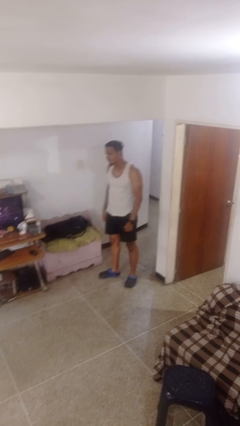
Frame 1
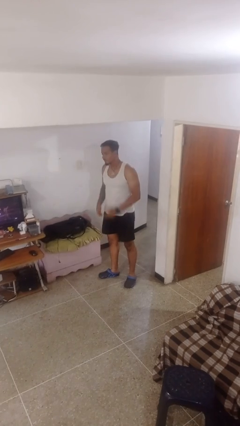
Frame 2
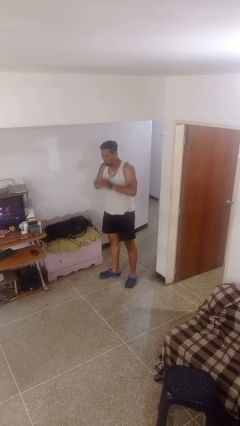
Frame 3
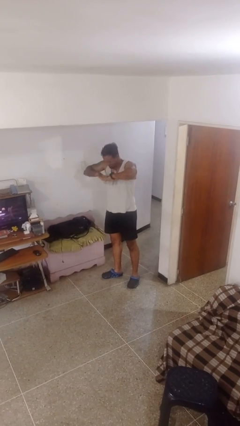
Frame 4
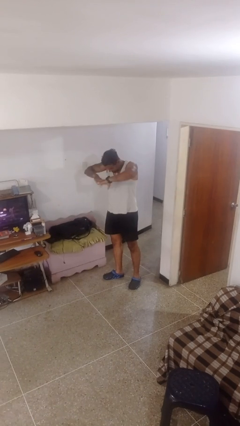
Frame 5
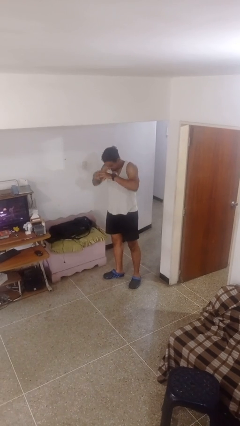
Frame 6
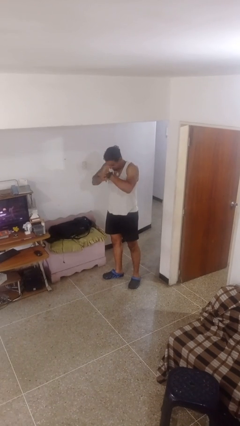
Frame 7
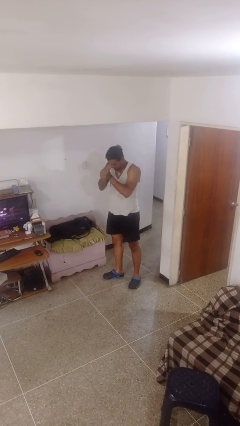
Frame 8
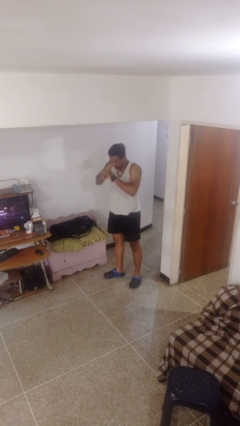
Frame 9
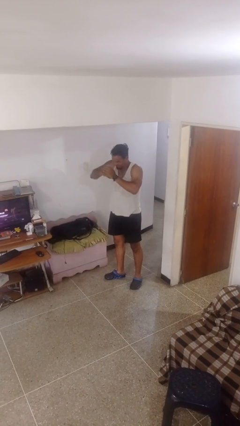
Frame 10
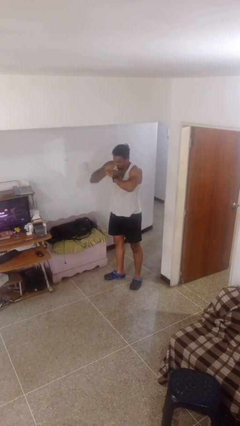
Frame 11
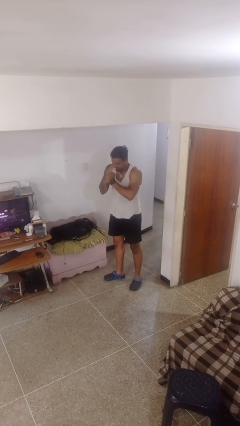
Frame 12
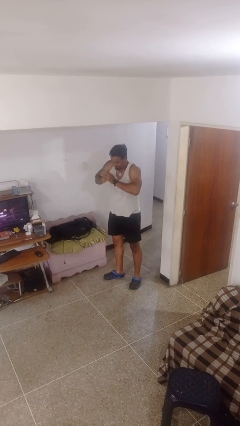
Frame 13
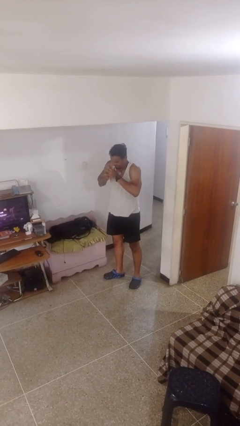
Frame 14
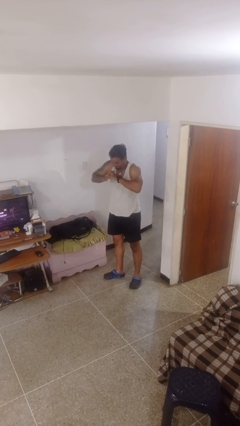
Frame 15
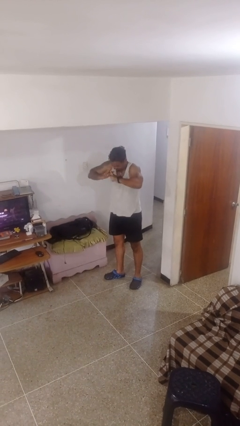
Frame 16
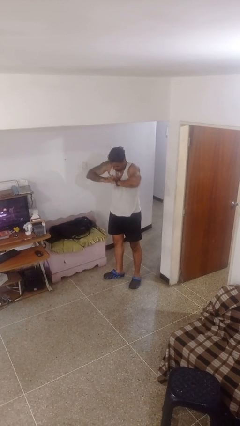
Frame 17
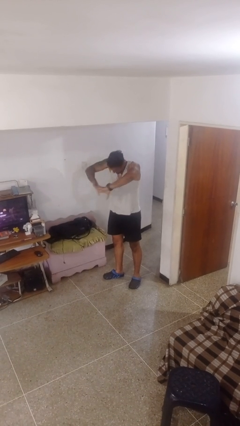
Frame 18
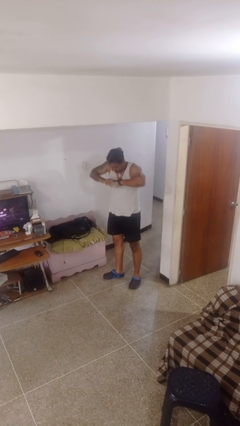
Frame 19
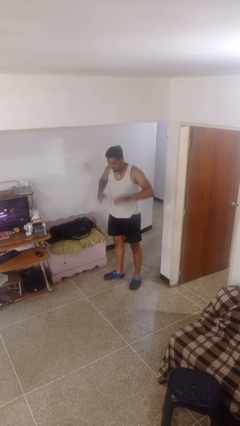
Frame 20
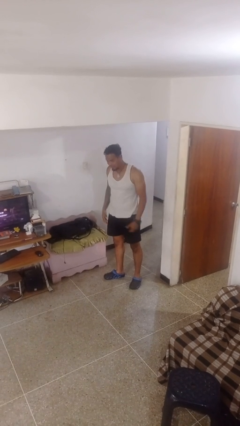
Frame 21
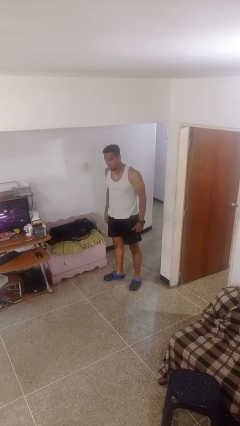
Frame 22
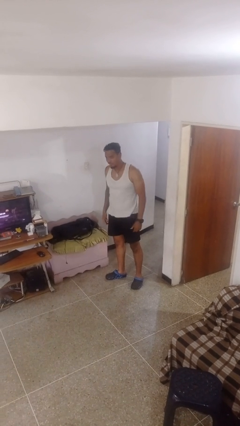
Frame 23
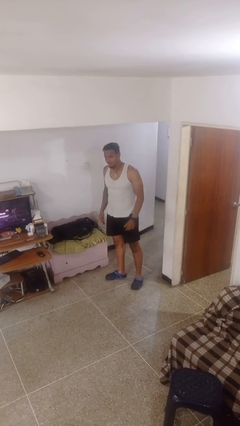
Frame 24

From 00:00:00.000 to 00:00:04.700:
person cracks knuckles

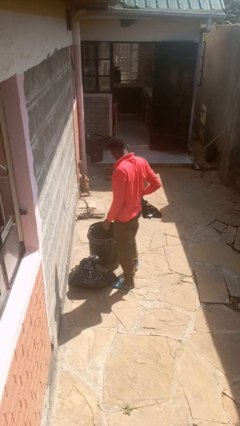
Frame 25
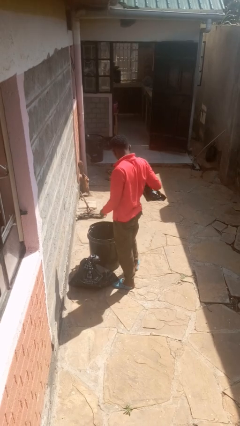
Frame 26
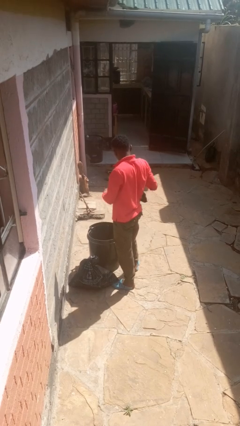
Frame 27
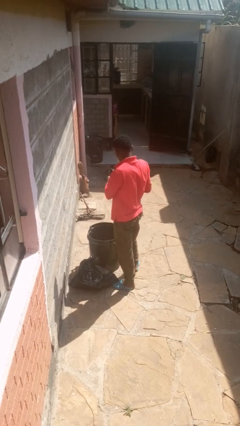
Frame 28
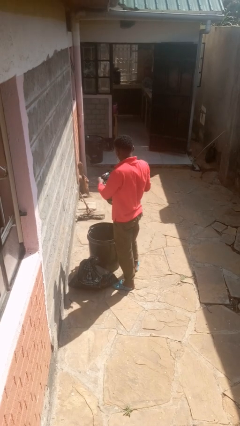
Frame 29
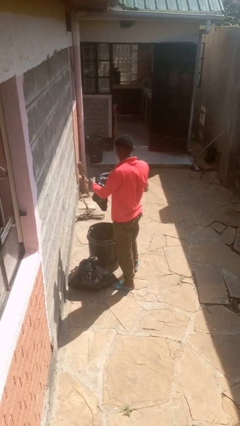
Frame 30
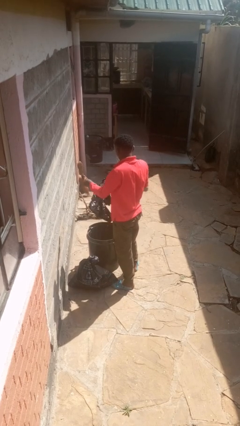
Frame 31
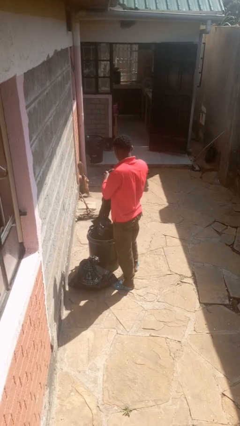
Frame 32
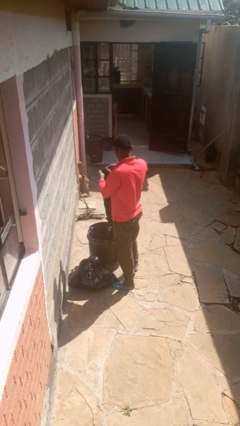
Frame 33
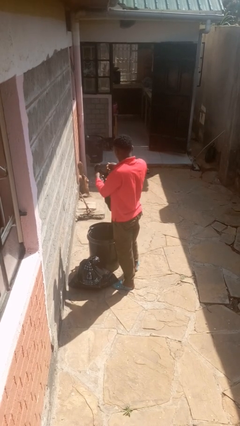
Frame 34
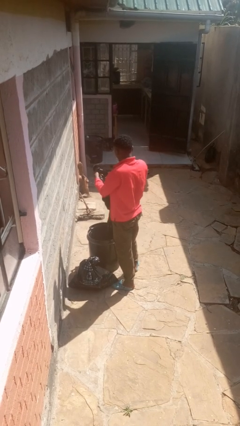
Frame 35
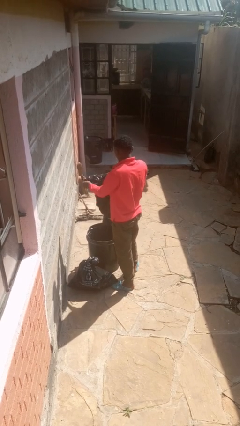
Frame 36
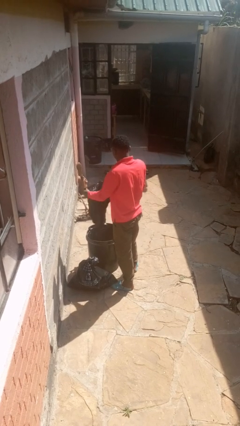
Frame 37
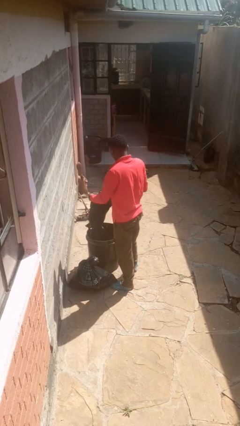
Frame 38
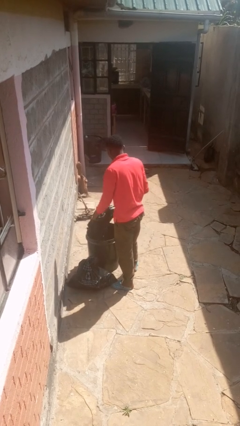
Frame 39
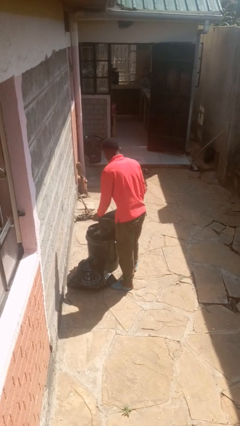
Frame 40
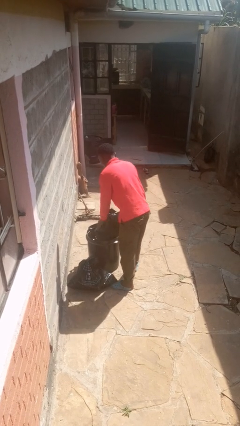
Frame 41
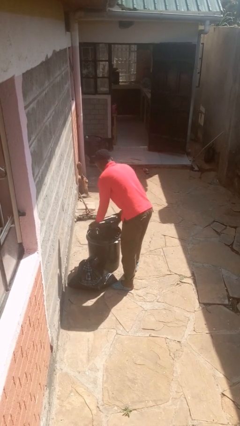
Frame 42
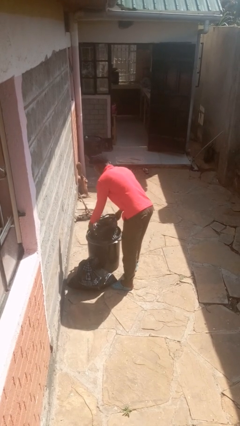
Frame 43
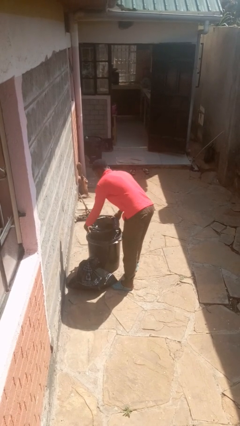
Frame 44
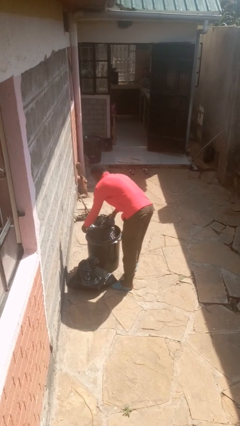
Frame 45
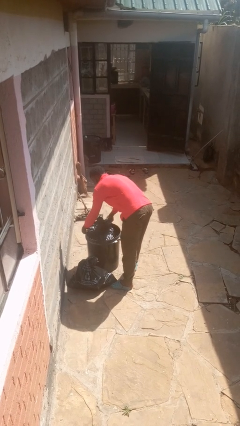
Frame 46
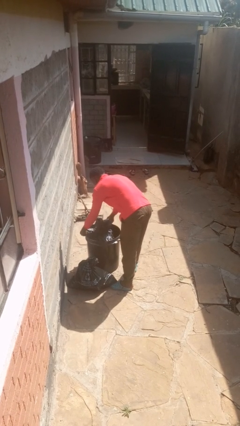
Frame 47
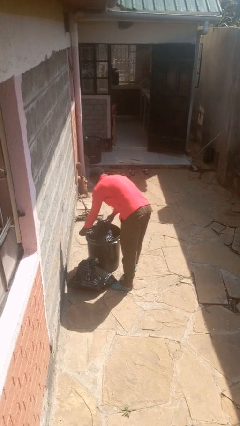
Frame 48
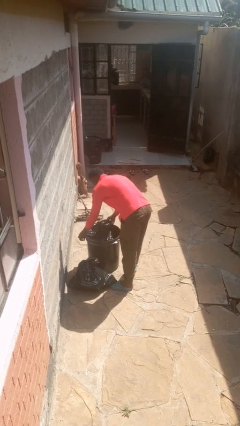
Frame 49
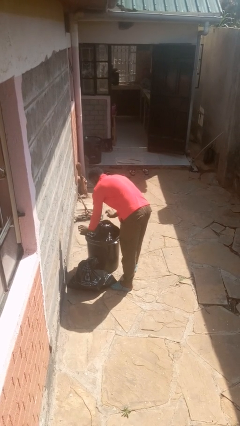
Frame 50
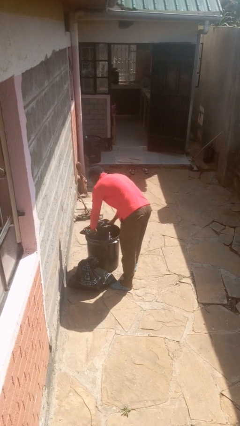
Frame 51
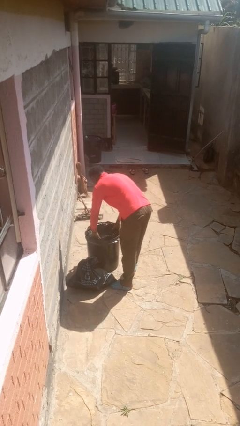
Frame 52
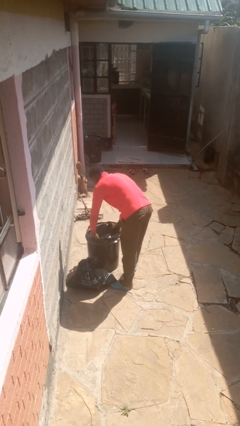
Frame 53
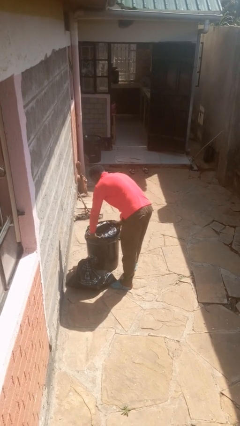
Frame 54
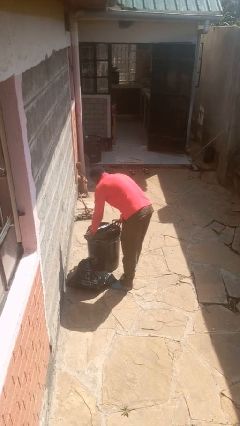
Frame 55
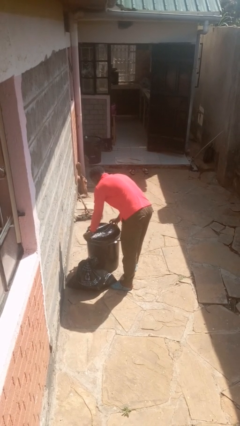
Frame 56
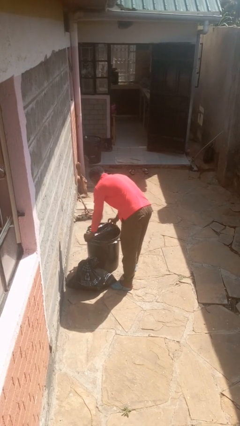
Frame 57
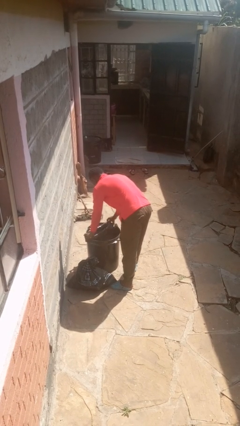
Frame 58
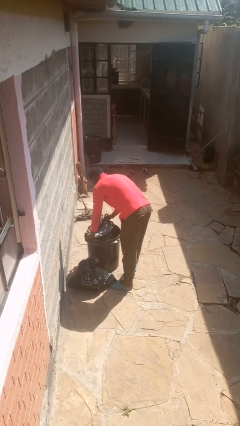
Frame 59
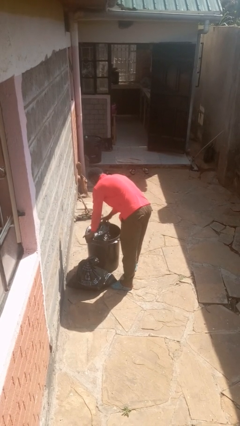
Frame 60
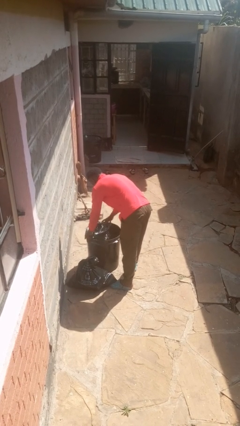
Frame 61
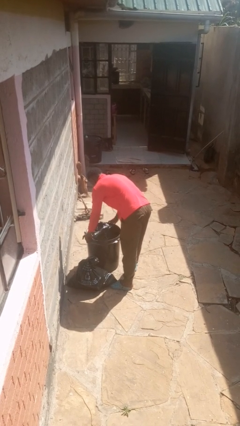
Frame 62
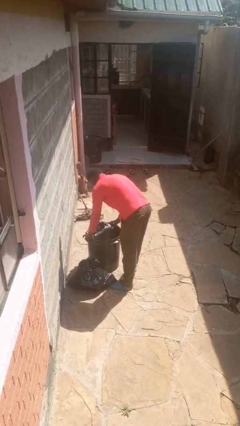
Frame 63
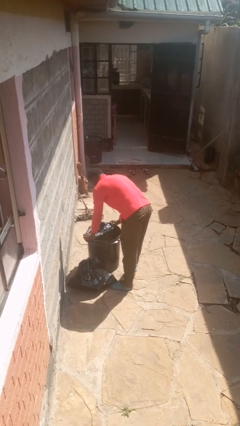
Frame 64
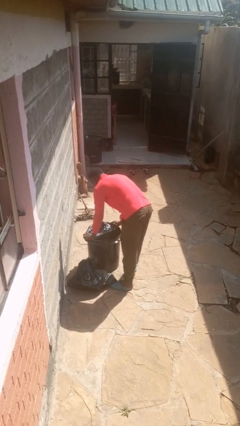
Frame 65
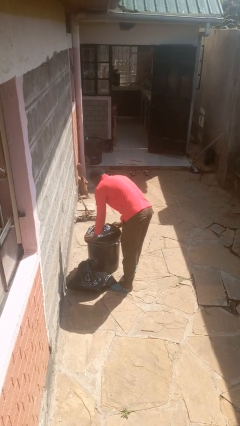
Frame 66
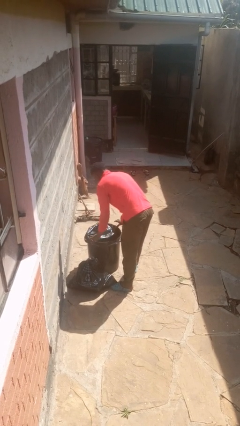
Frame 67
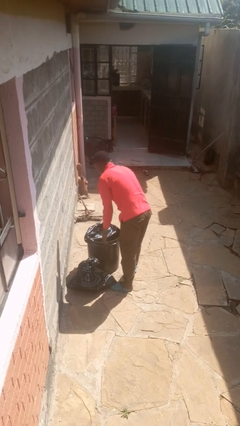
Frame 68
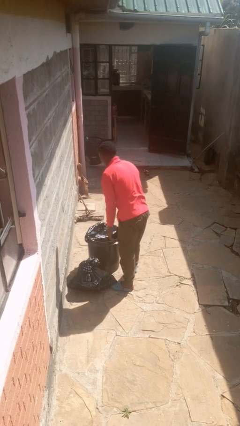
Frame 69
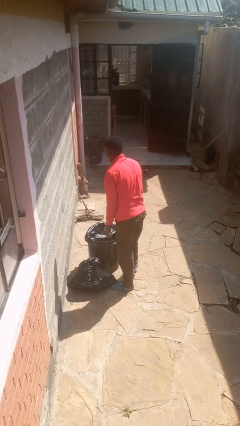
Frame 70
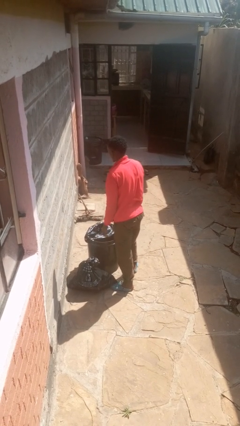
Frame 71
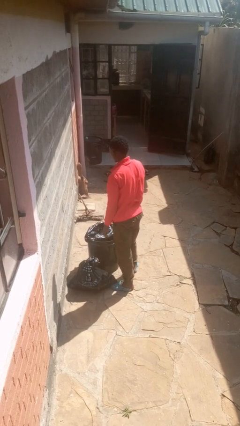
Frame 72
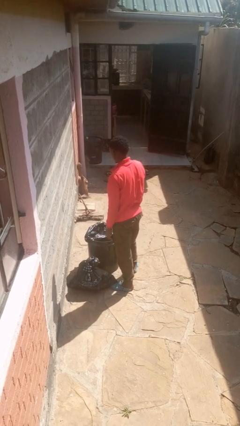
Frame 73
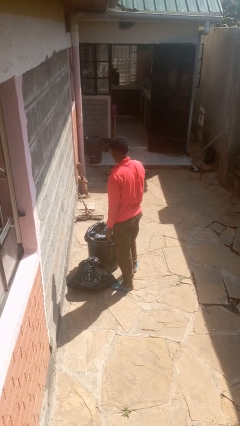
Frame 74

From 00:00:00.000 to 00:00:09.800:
person inserts trashbag into trashcan

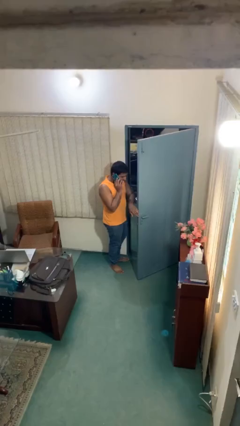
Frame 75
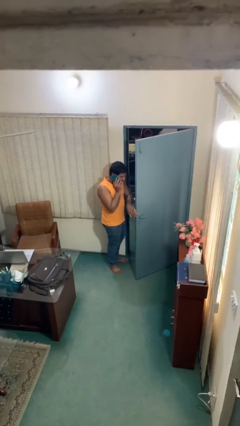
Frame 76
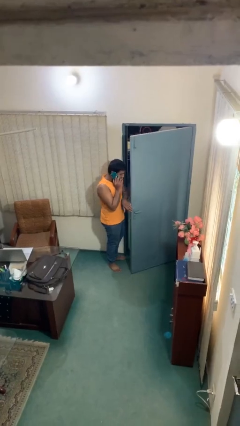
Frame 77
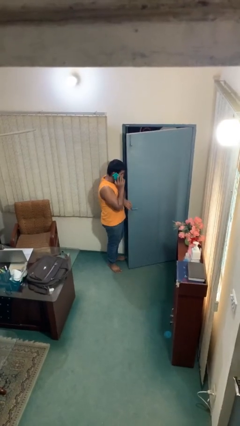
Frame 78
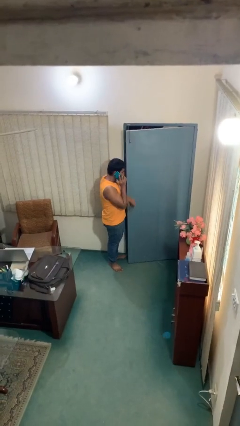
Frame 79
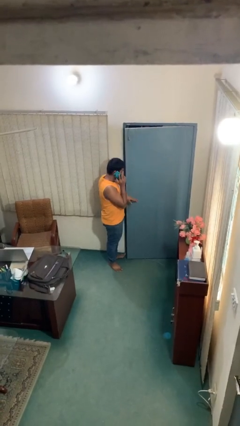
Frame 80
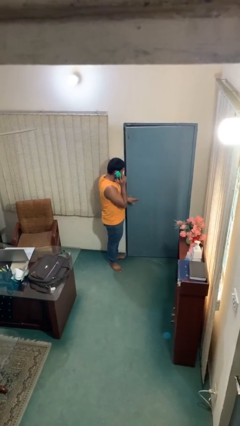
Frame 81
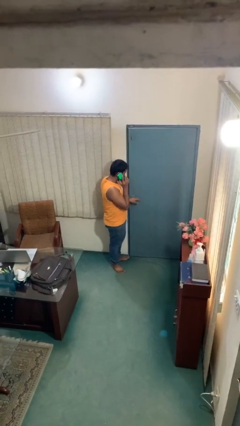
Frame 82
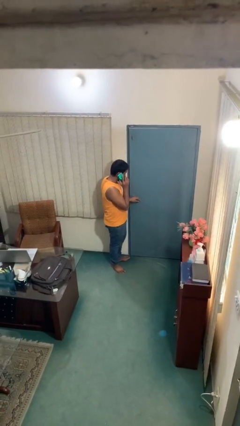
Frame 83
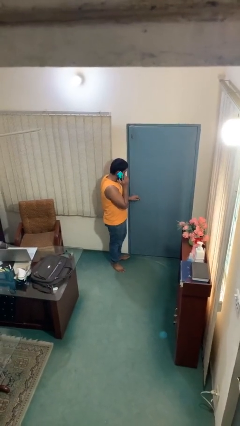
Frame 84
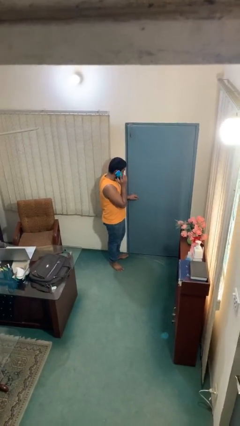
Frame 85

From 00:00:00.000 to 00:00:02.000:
person closes facility door

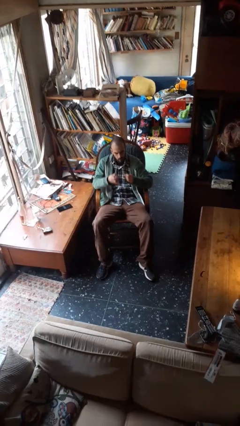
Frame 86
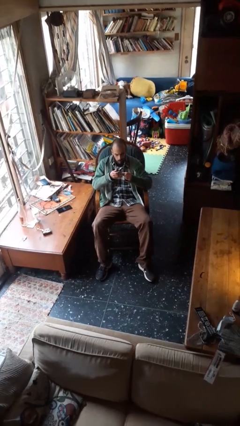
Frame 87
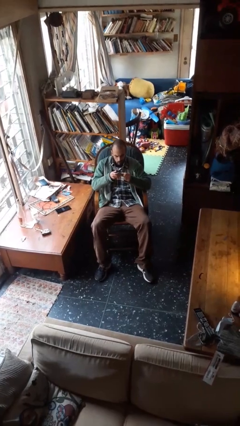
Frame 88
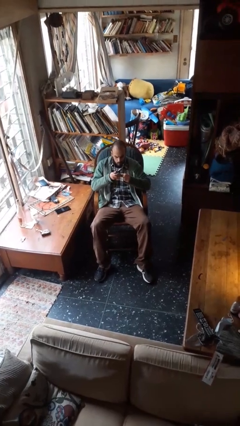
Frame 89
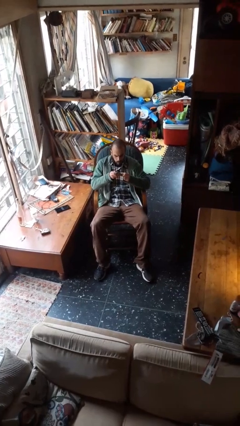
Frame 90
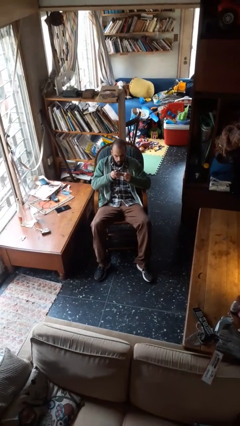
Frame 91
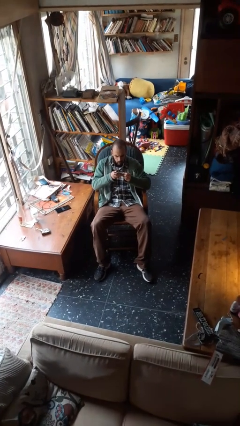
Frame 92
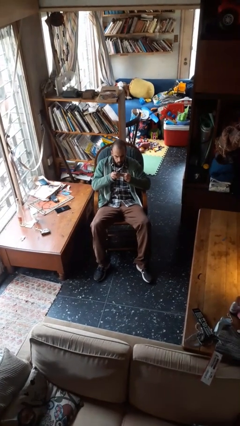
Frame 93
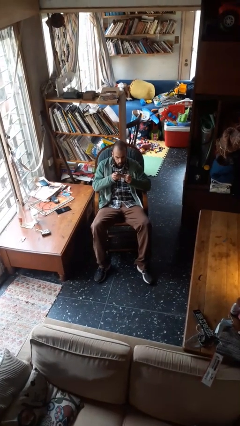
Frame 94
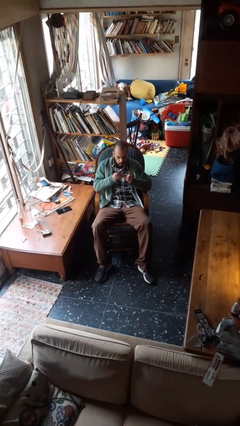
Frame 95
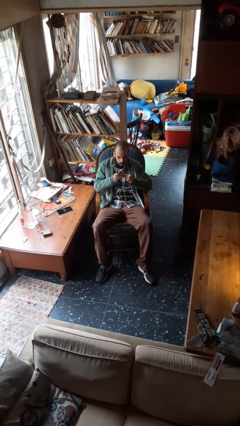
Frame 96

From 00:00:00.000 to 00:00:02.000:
person clips fingernails
